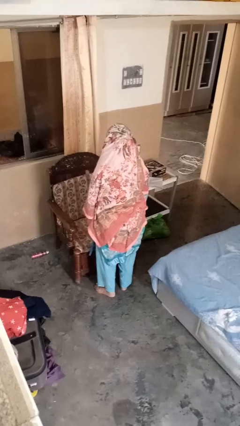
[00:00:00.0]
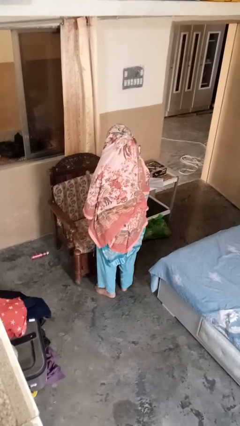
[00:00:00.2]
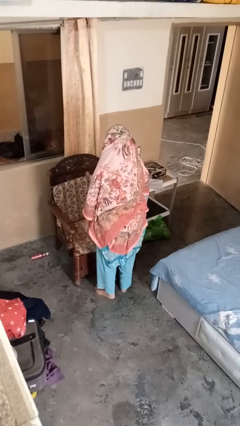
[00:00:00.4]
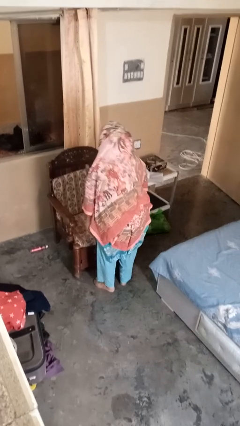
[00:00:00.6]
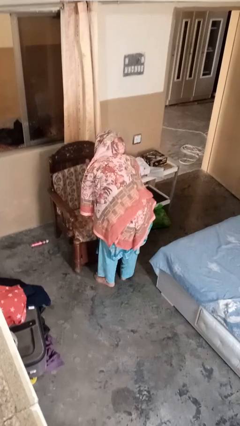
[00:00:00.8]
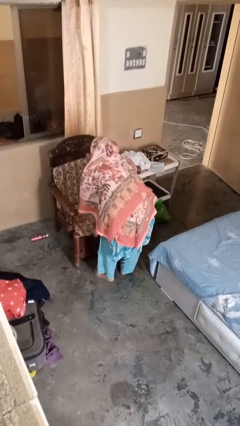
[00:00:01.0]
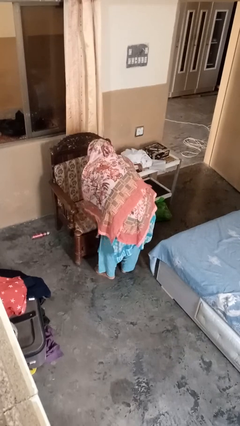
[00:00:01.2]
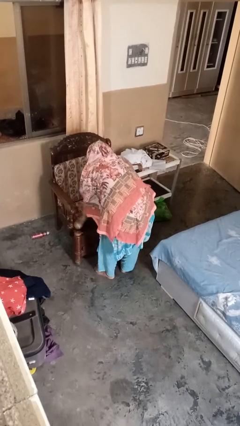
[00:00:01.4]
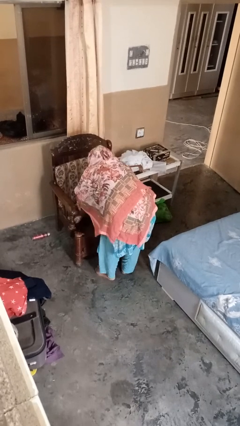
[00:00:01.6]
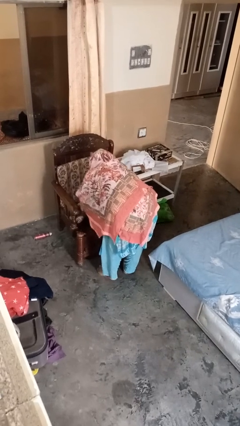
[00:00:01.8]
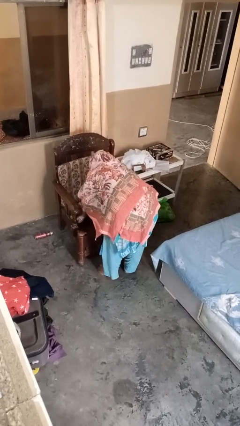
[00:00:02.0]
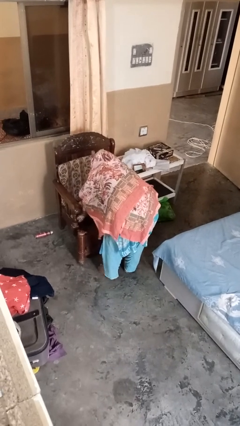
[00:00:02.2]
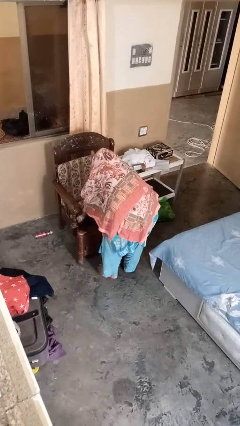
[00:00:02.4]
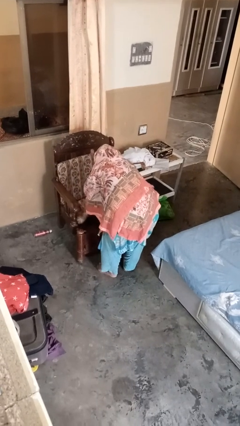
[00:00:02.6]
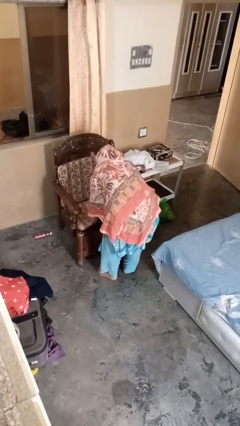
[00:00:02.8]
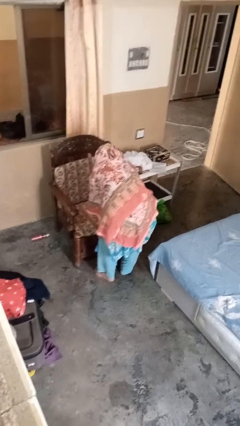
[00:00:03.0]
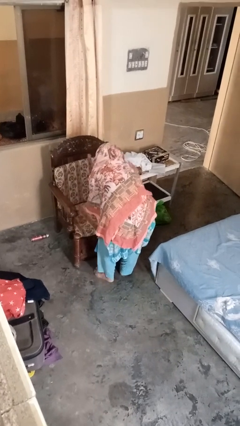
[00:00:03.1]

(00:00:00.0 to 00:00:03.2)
person searches under couch

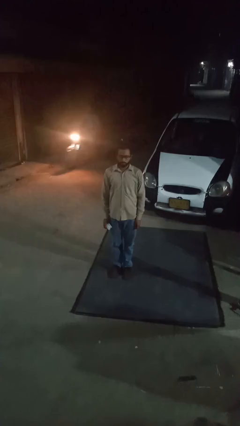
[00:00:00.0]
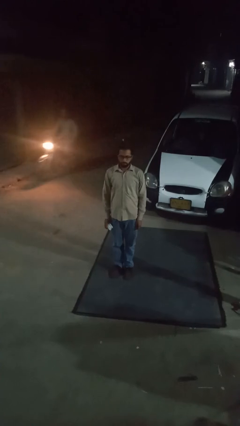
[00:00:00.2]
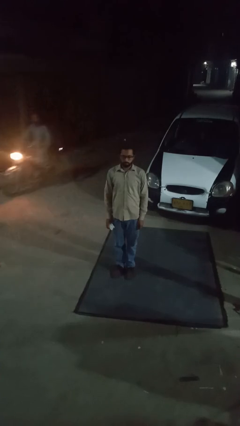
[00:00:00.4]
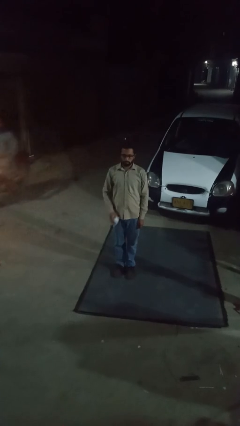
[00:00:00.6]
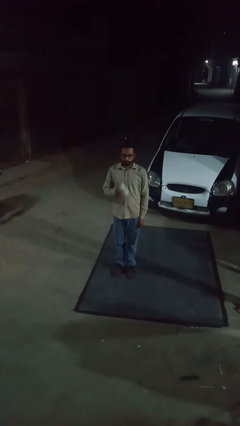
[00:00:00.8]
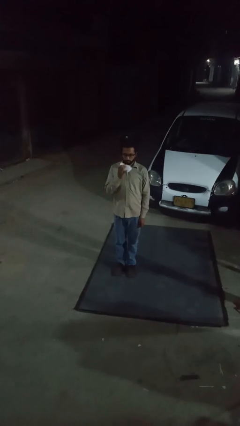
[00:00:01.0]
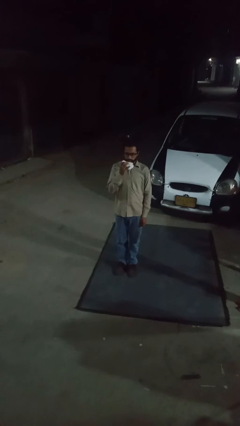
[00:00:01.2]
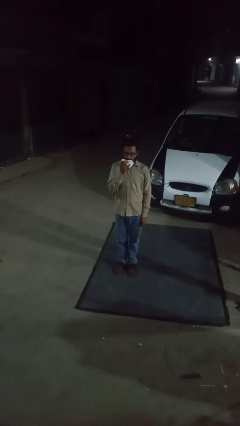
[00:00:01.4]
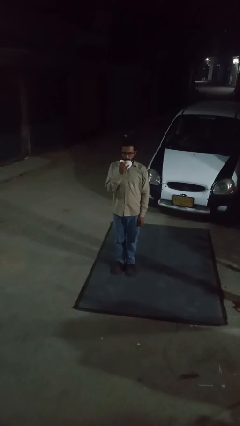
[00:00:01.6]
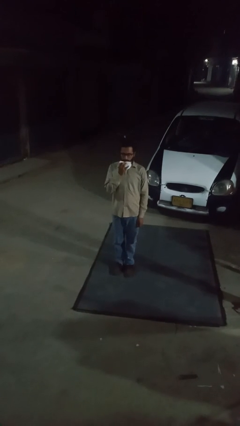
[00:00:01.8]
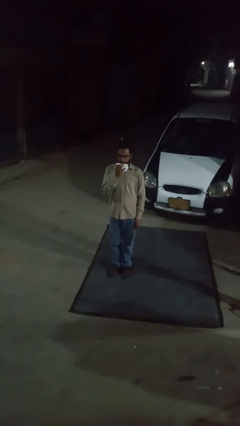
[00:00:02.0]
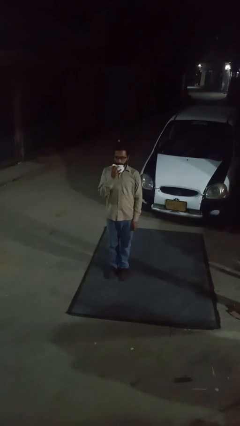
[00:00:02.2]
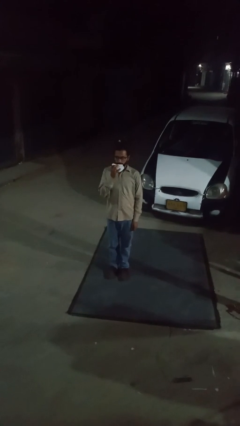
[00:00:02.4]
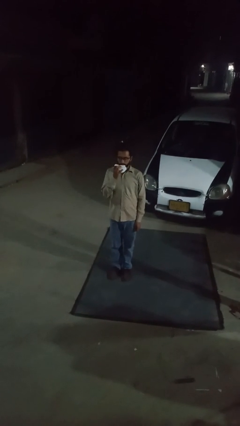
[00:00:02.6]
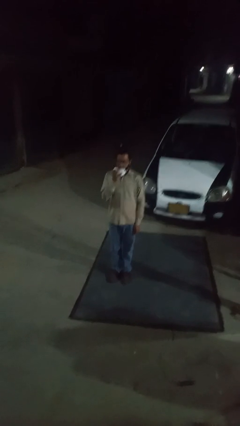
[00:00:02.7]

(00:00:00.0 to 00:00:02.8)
person wipes mouth with napkin

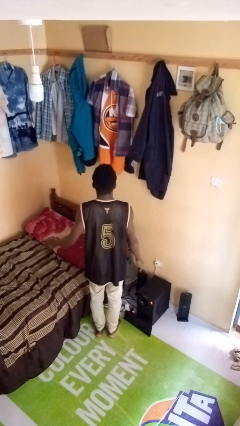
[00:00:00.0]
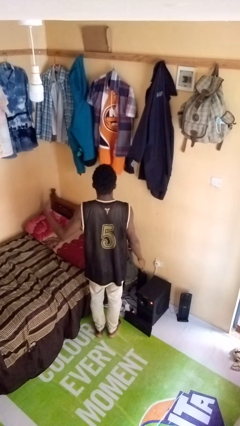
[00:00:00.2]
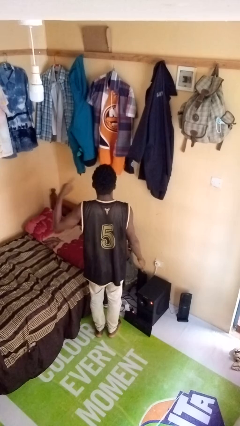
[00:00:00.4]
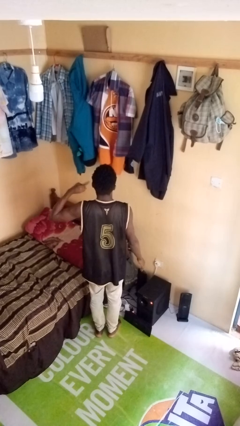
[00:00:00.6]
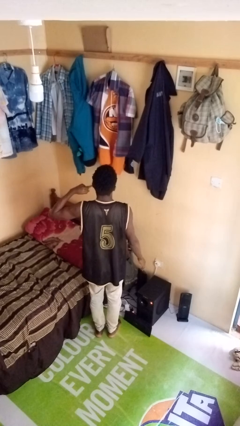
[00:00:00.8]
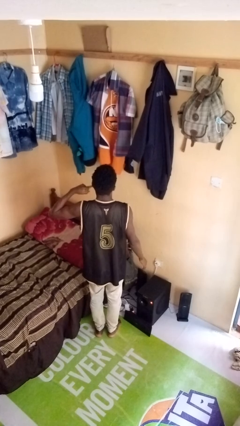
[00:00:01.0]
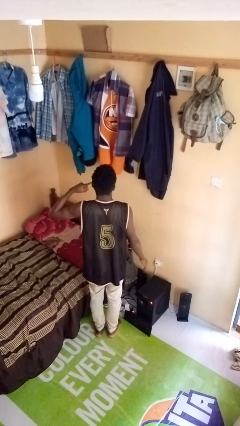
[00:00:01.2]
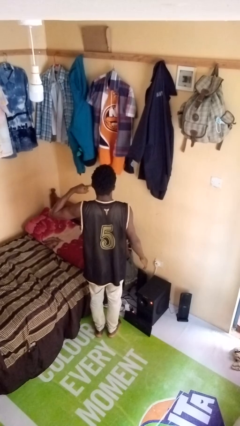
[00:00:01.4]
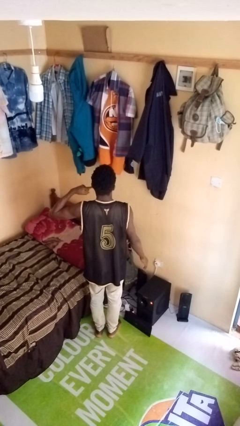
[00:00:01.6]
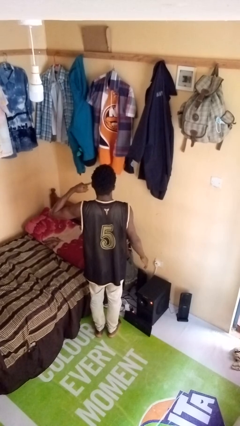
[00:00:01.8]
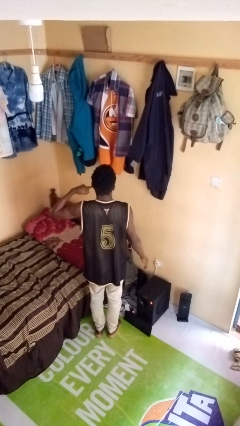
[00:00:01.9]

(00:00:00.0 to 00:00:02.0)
person gestures listen closely

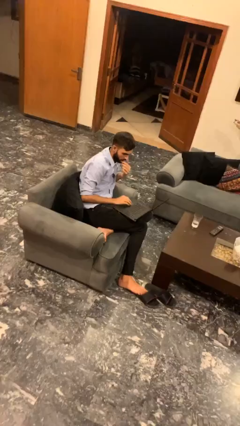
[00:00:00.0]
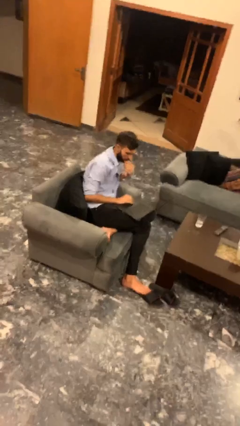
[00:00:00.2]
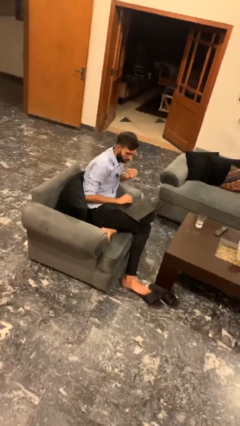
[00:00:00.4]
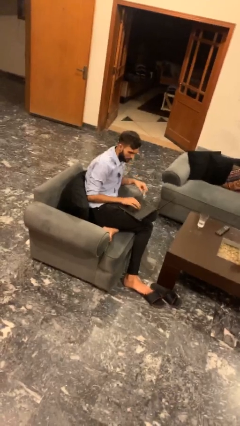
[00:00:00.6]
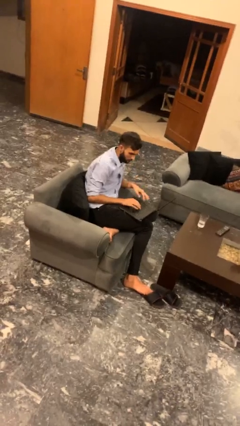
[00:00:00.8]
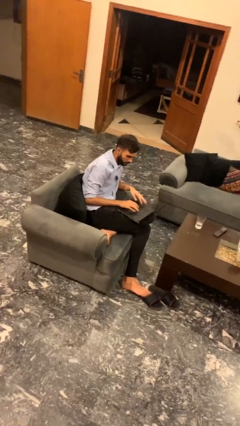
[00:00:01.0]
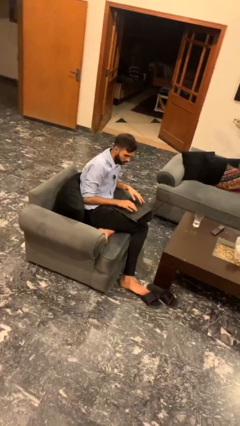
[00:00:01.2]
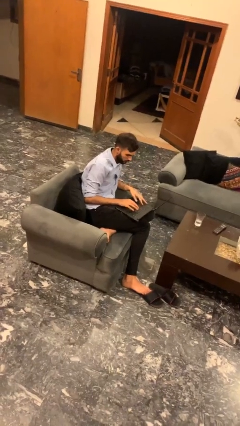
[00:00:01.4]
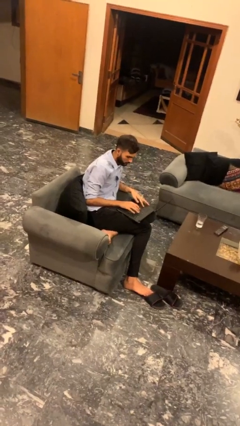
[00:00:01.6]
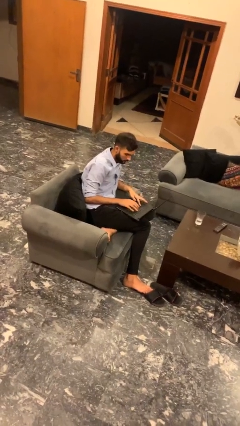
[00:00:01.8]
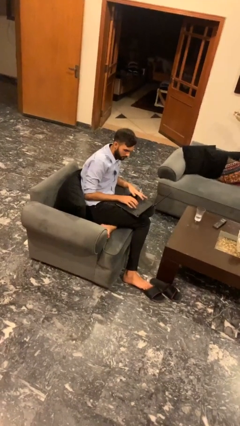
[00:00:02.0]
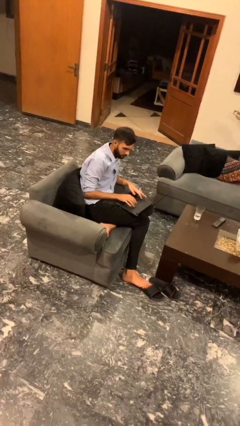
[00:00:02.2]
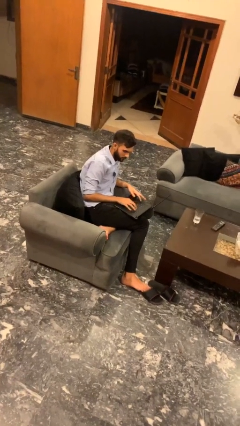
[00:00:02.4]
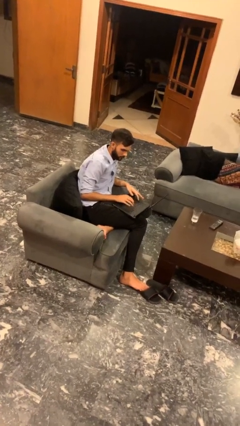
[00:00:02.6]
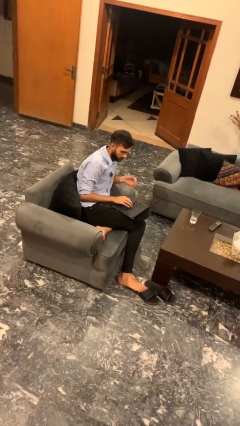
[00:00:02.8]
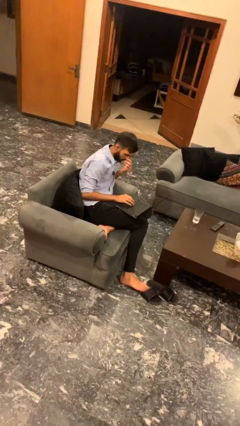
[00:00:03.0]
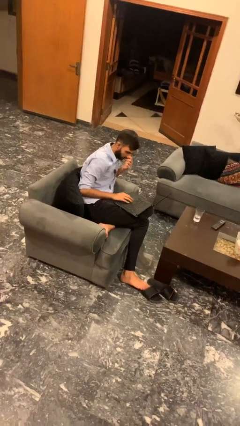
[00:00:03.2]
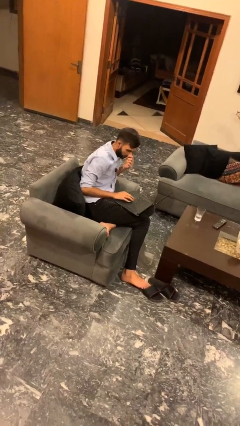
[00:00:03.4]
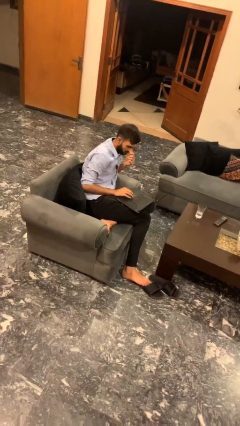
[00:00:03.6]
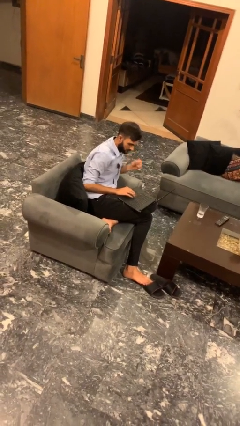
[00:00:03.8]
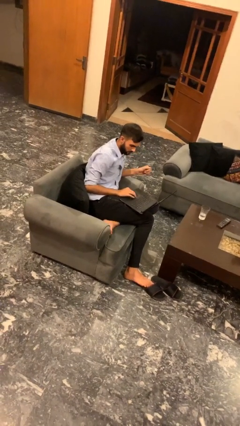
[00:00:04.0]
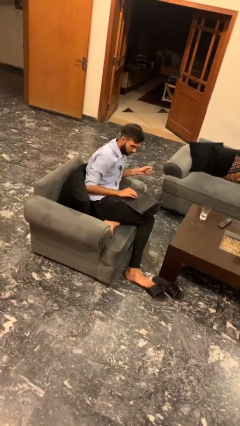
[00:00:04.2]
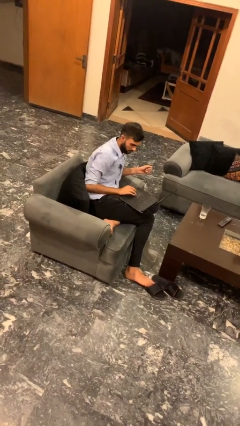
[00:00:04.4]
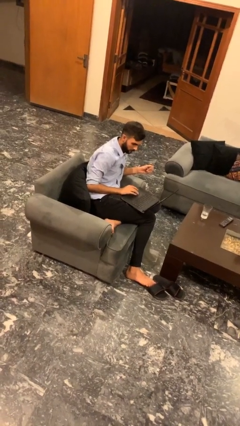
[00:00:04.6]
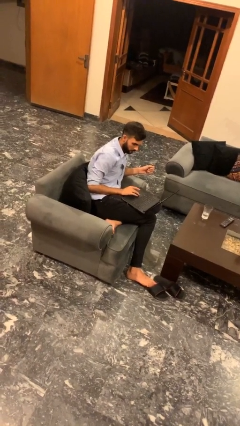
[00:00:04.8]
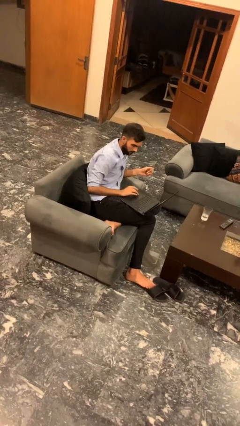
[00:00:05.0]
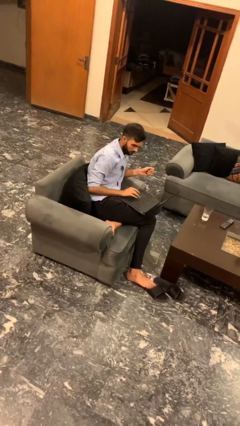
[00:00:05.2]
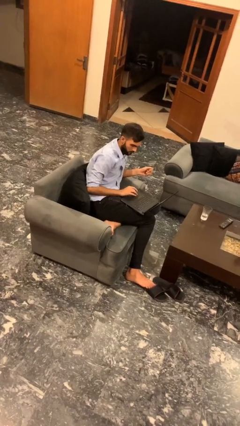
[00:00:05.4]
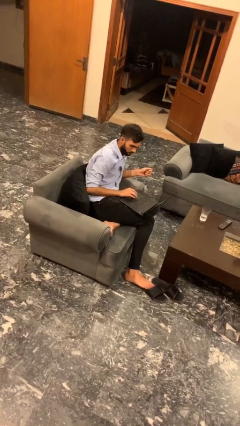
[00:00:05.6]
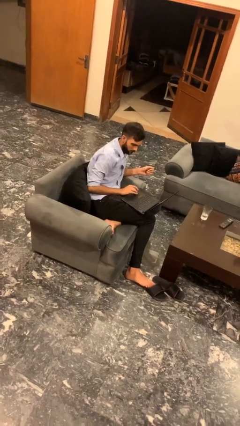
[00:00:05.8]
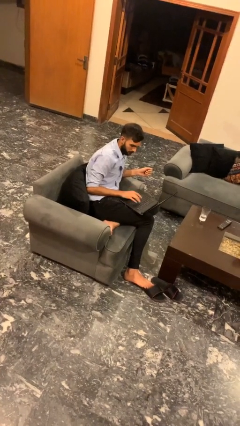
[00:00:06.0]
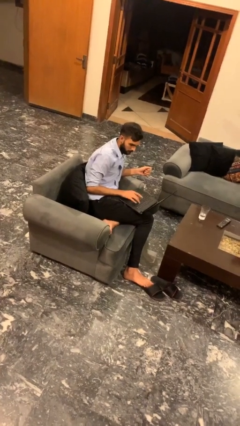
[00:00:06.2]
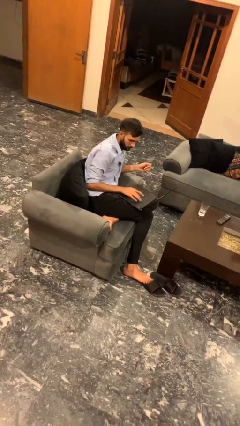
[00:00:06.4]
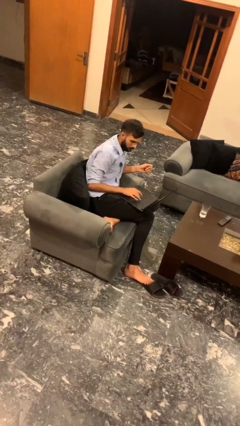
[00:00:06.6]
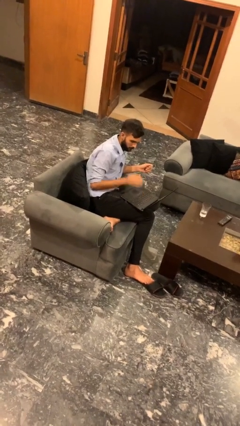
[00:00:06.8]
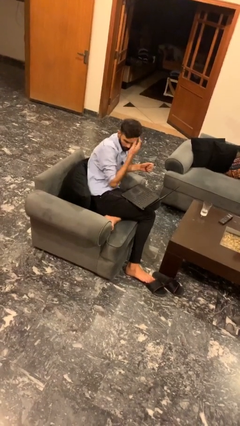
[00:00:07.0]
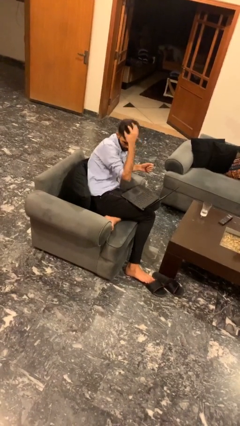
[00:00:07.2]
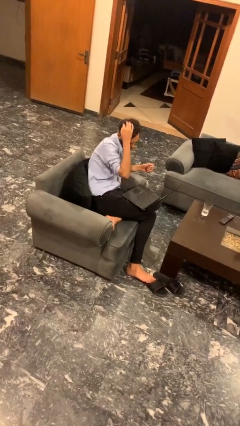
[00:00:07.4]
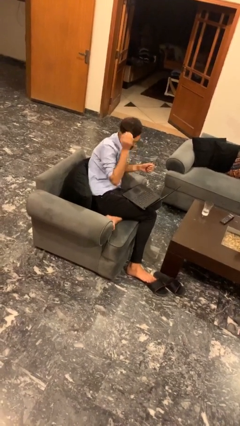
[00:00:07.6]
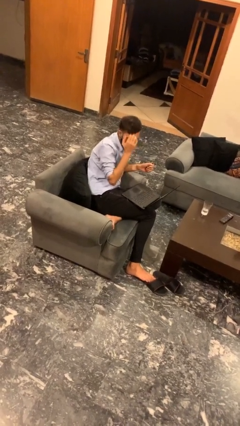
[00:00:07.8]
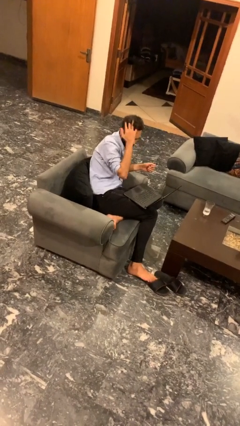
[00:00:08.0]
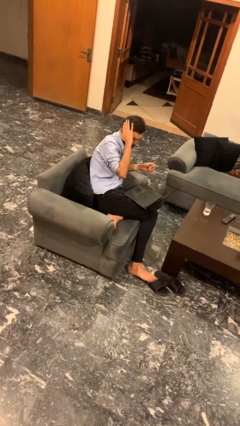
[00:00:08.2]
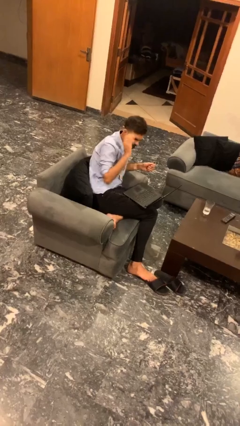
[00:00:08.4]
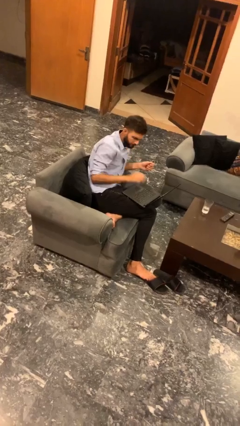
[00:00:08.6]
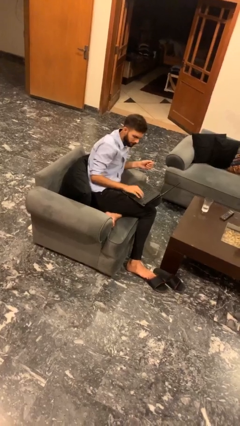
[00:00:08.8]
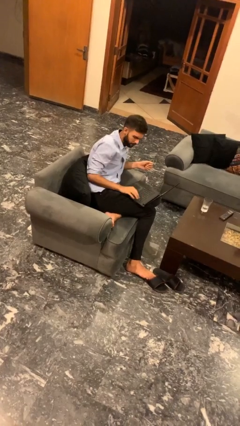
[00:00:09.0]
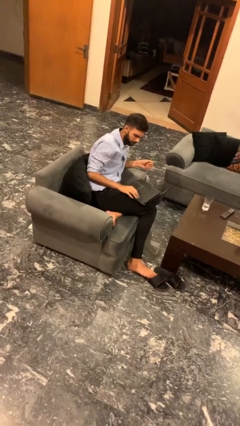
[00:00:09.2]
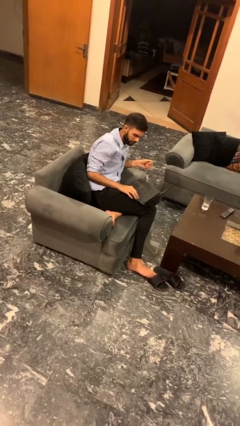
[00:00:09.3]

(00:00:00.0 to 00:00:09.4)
person interacts with laptop
